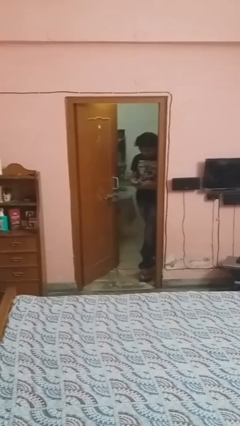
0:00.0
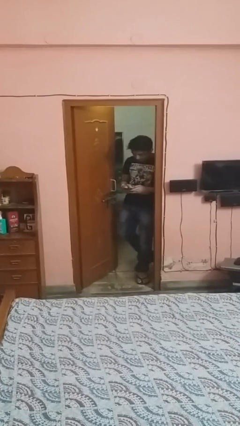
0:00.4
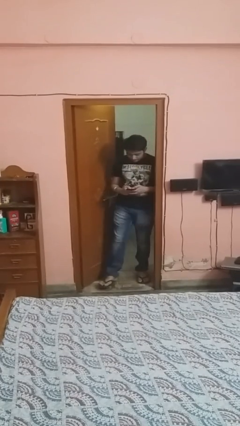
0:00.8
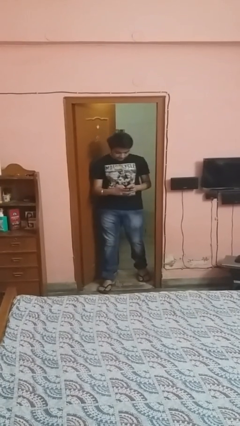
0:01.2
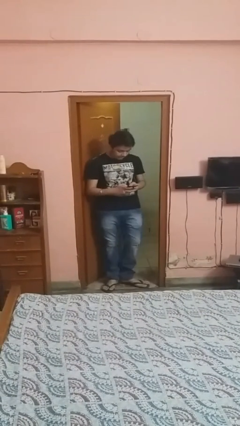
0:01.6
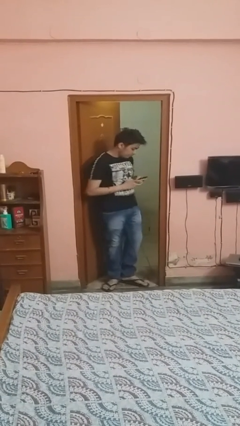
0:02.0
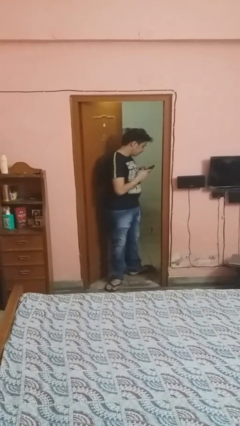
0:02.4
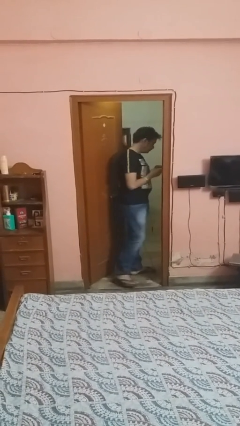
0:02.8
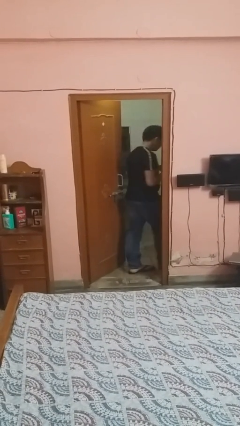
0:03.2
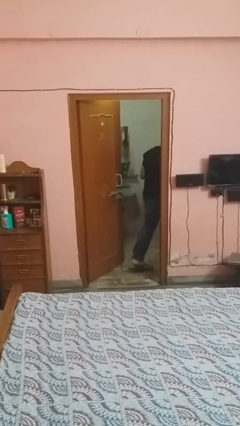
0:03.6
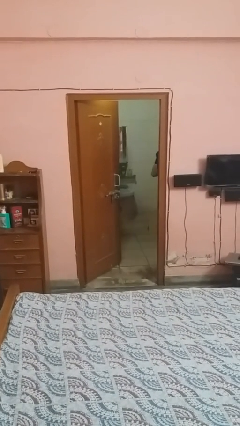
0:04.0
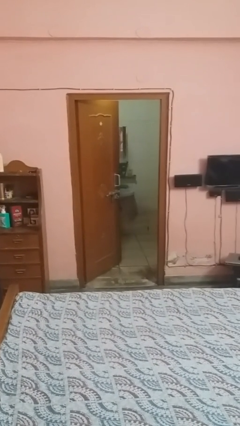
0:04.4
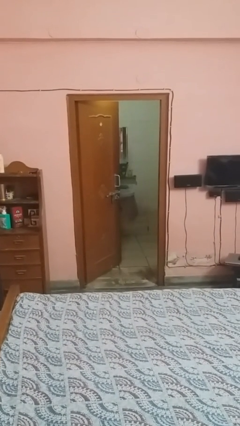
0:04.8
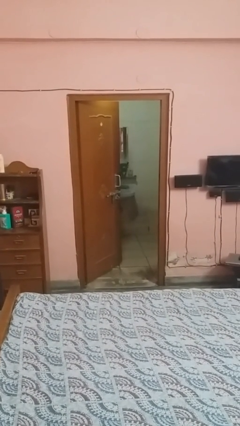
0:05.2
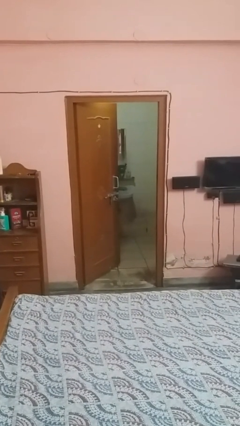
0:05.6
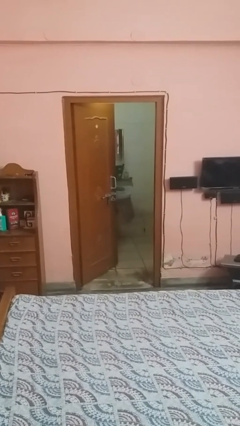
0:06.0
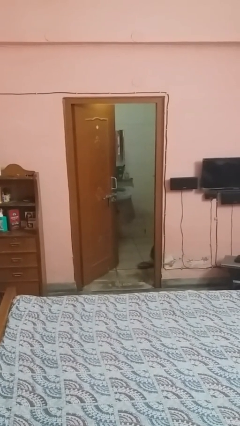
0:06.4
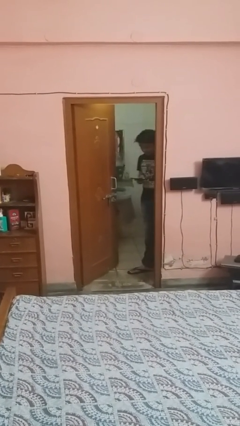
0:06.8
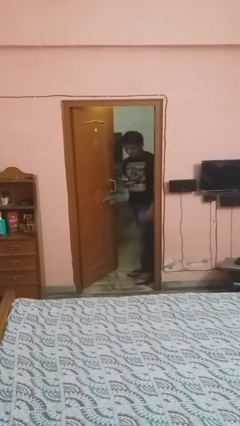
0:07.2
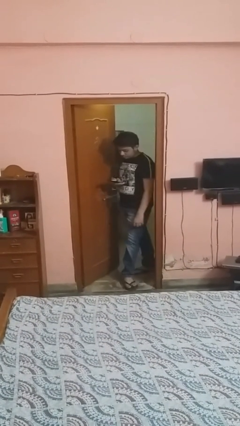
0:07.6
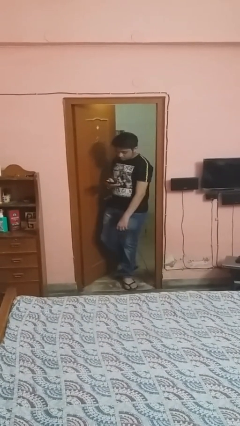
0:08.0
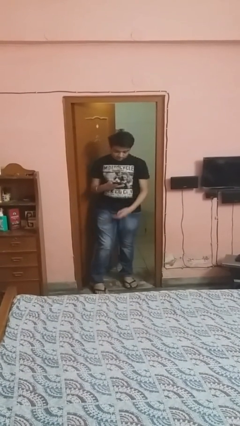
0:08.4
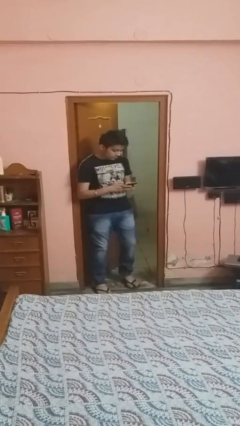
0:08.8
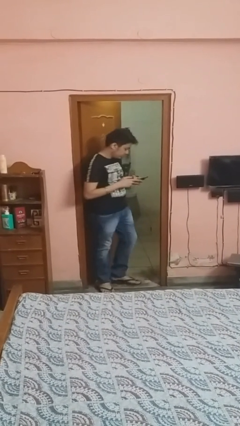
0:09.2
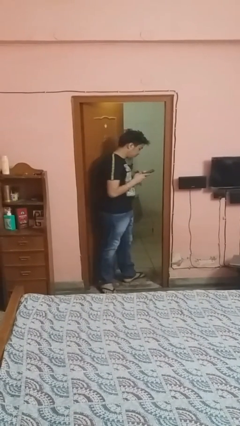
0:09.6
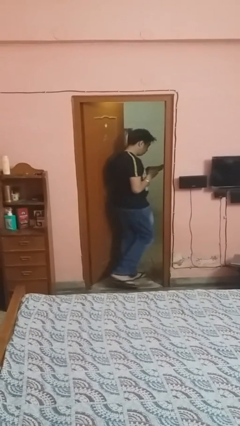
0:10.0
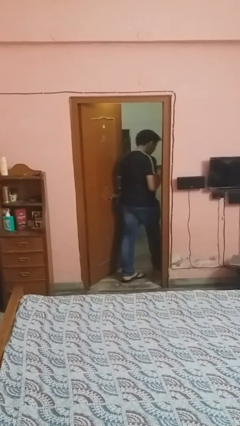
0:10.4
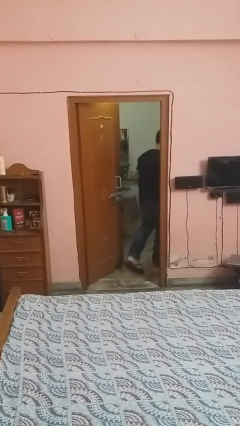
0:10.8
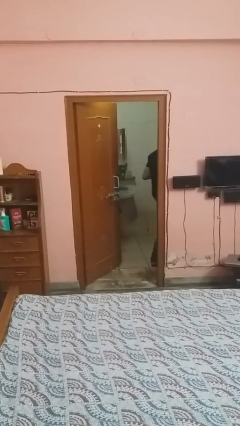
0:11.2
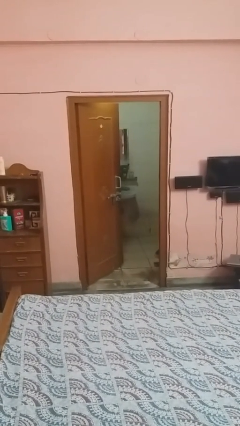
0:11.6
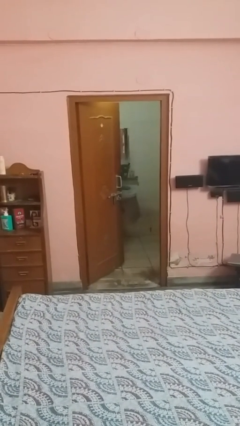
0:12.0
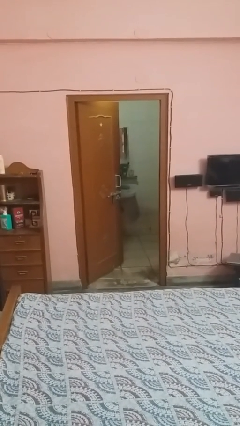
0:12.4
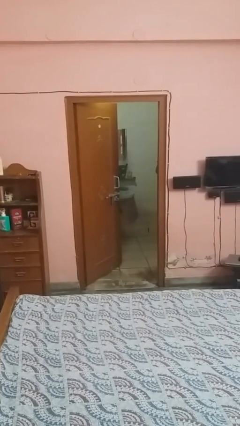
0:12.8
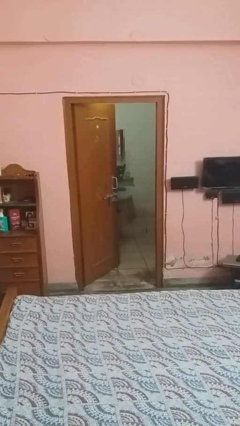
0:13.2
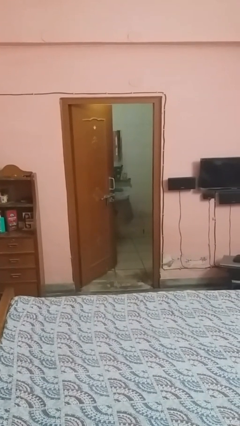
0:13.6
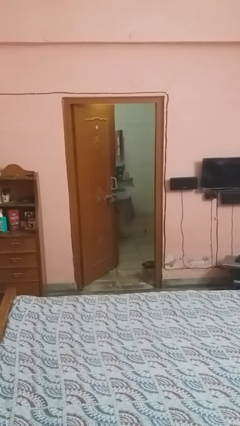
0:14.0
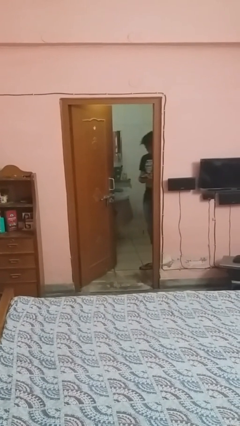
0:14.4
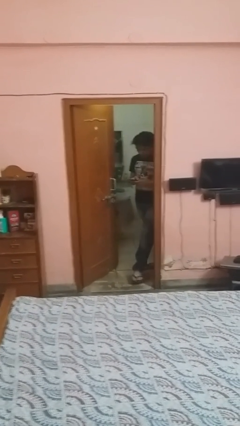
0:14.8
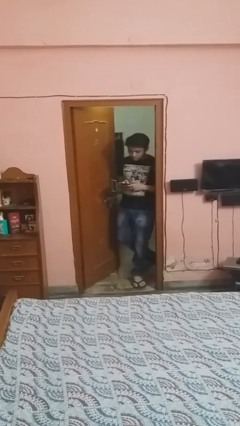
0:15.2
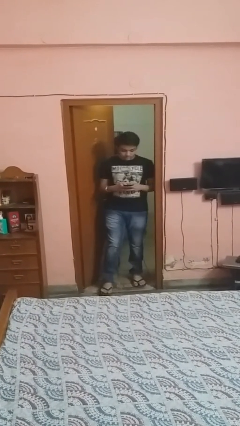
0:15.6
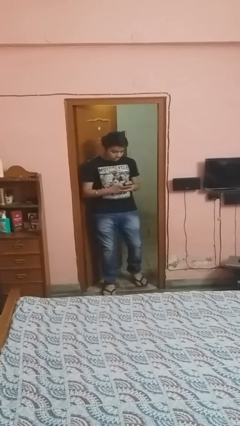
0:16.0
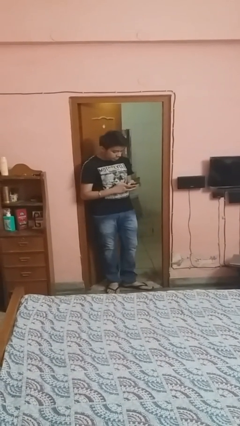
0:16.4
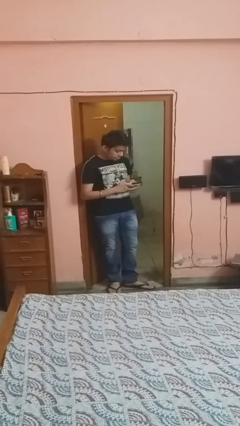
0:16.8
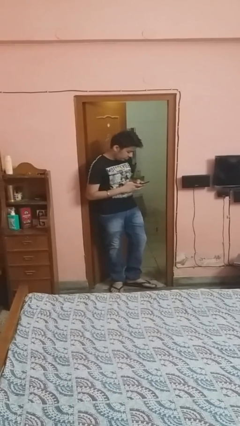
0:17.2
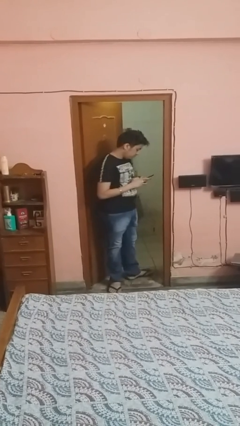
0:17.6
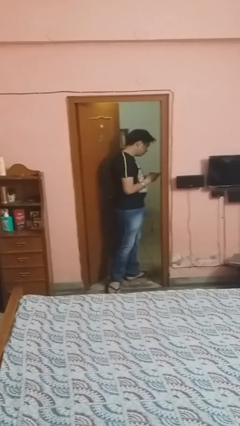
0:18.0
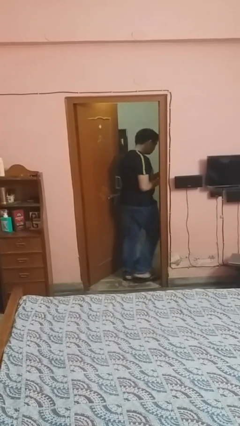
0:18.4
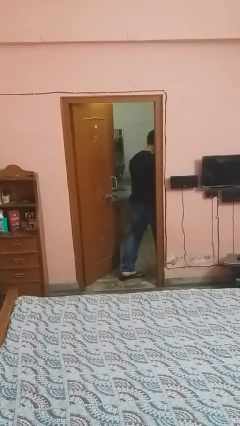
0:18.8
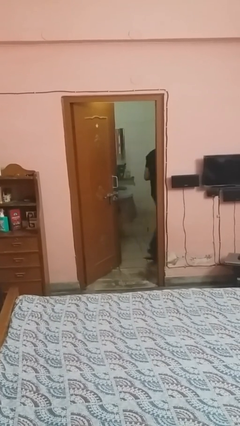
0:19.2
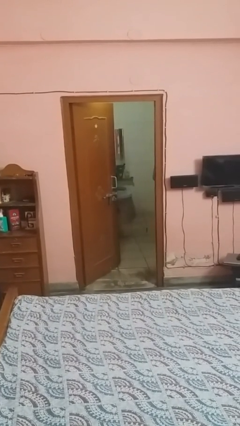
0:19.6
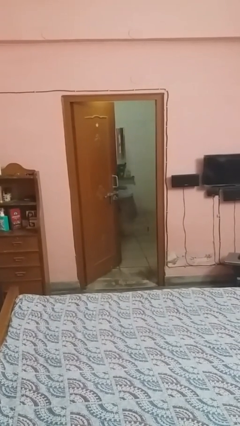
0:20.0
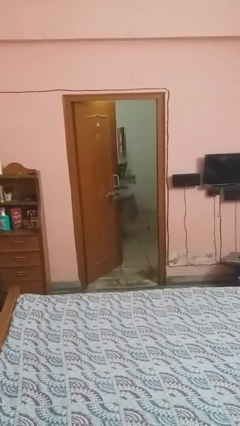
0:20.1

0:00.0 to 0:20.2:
person texts on phone

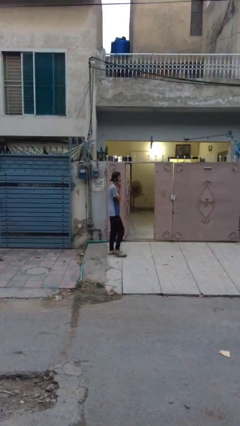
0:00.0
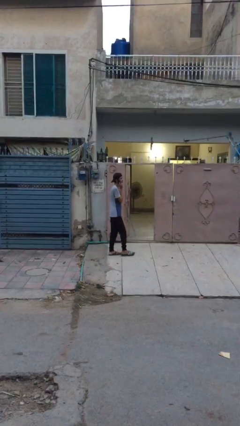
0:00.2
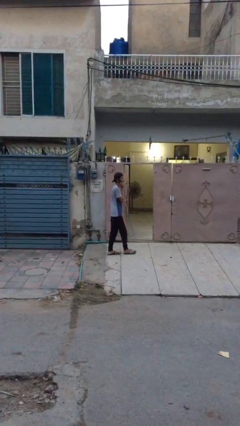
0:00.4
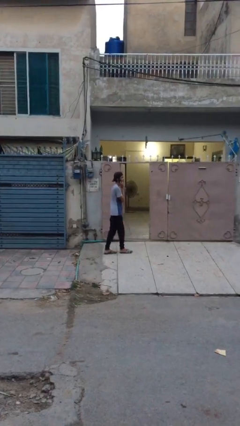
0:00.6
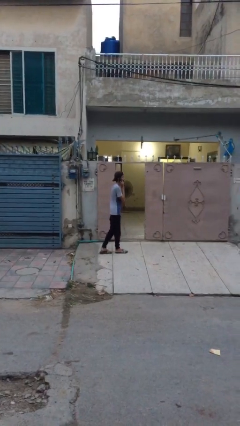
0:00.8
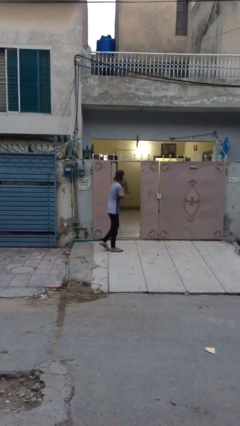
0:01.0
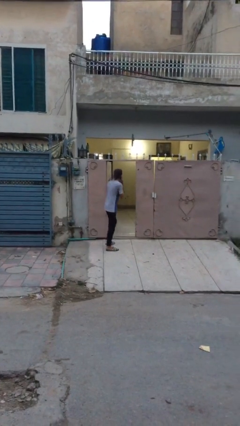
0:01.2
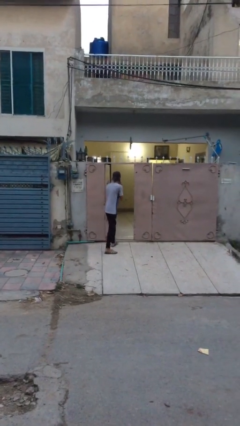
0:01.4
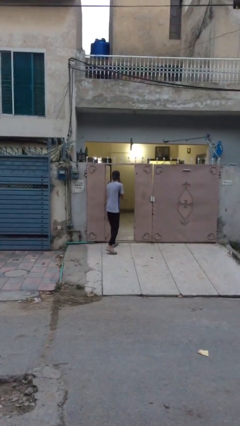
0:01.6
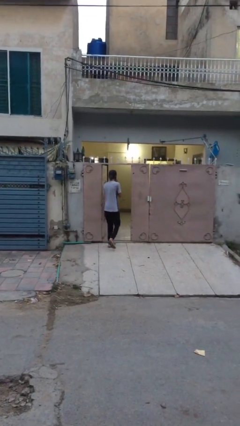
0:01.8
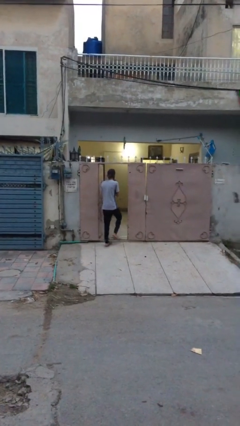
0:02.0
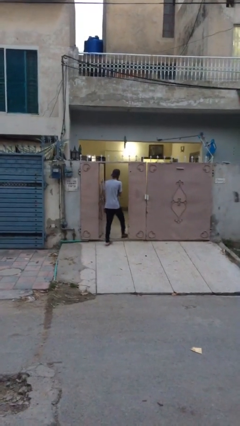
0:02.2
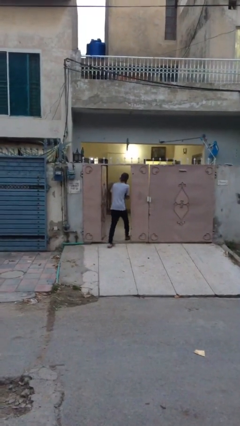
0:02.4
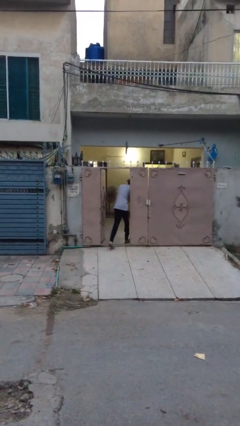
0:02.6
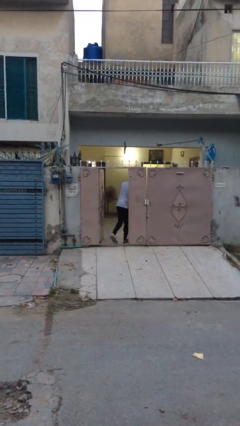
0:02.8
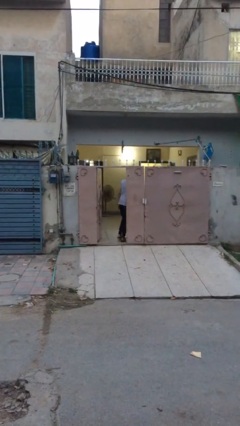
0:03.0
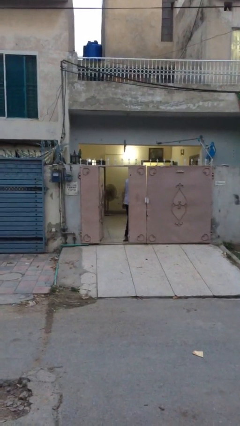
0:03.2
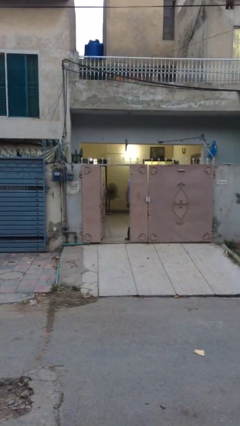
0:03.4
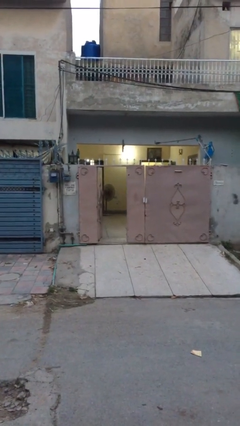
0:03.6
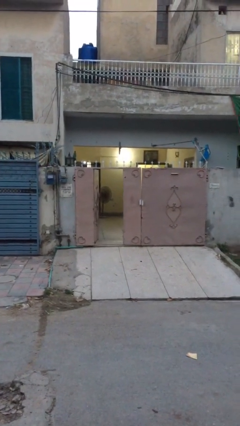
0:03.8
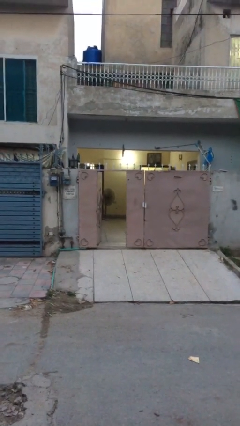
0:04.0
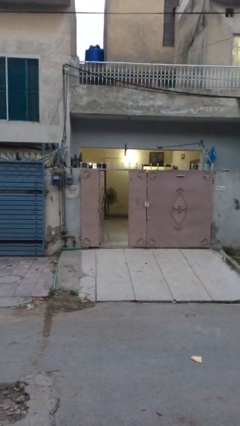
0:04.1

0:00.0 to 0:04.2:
person exits scene through structure

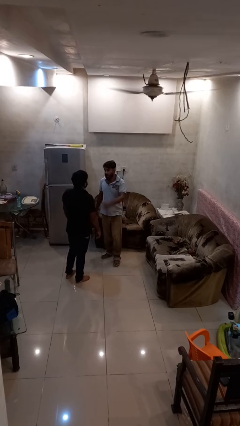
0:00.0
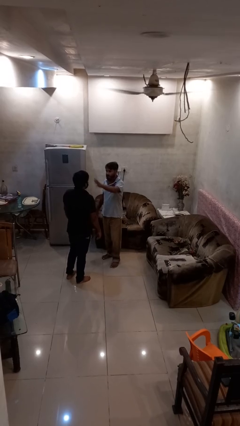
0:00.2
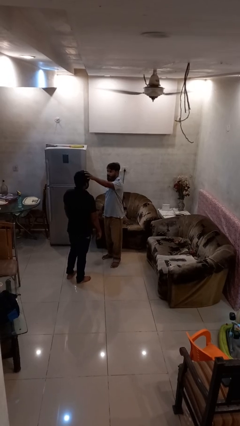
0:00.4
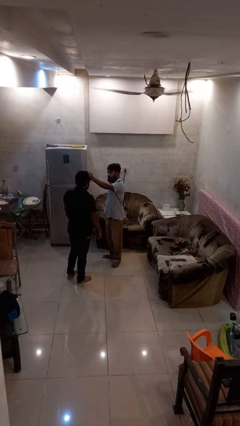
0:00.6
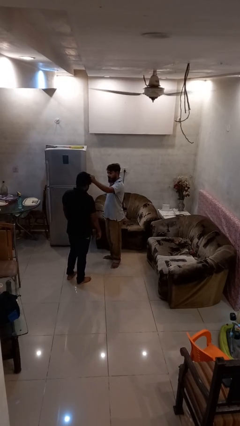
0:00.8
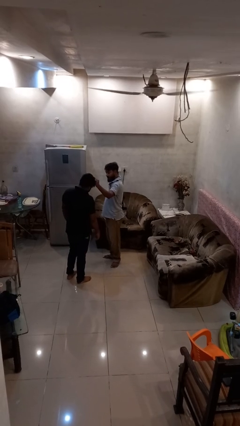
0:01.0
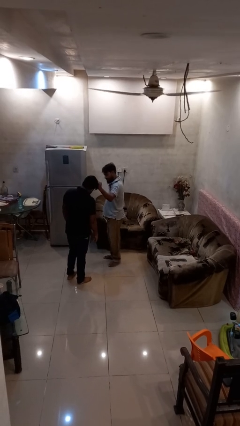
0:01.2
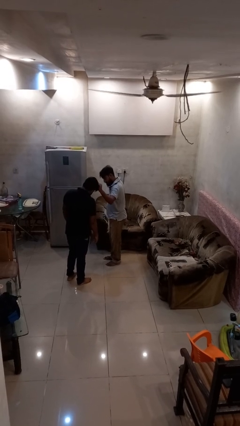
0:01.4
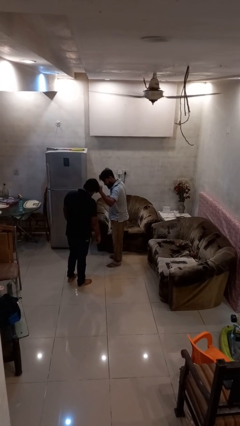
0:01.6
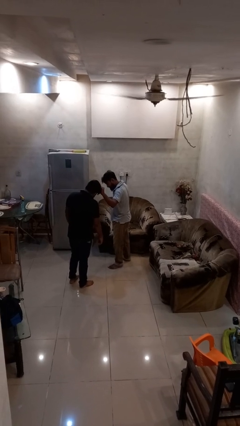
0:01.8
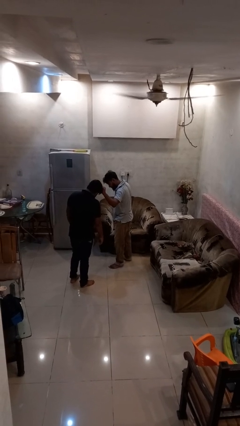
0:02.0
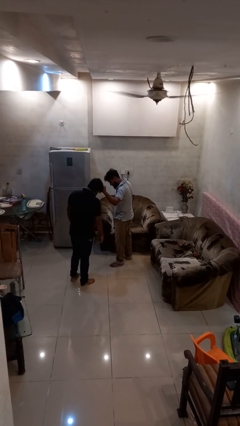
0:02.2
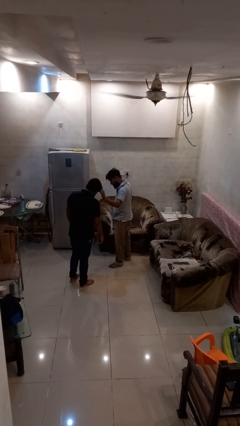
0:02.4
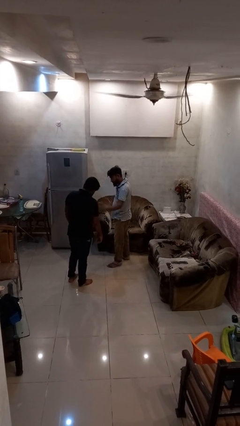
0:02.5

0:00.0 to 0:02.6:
person grabs person by hair

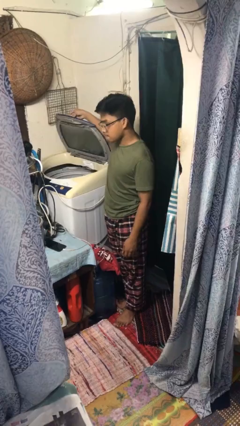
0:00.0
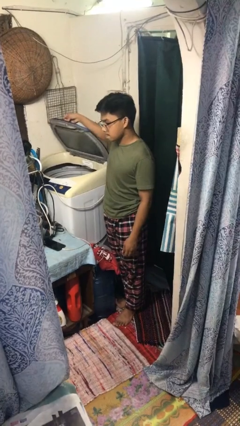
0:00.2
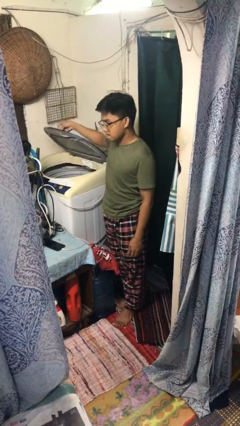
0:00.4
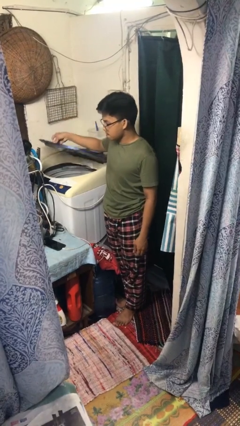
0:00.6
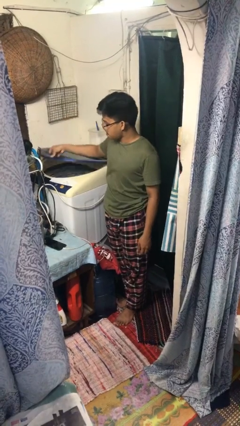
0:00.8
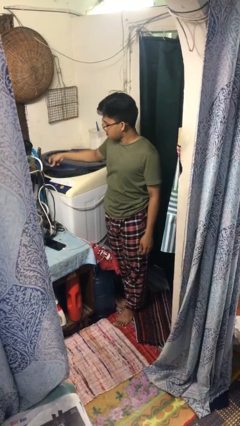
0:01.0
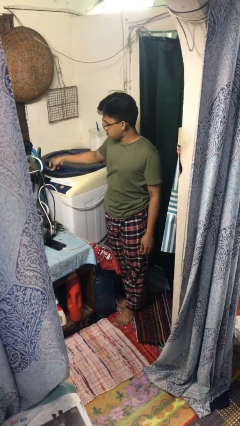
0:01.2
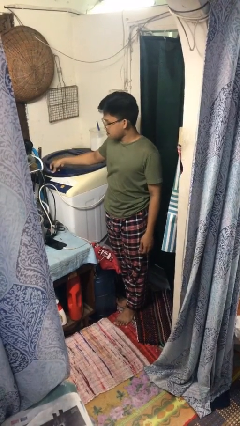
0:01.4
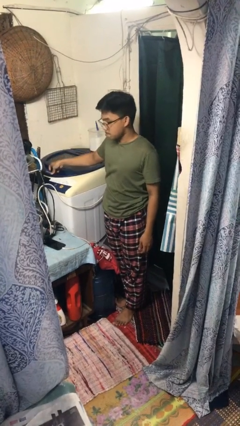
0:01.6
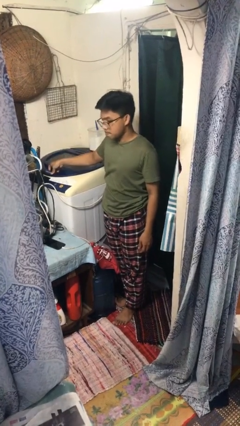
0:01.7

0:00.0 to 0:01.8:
person closes clothes washer
